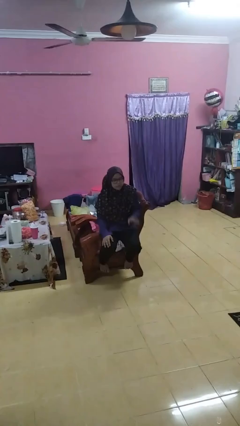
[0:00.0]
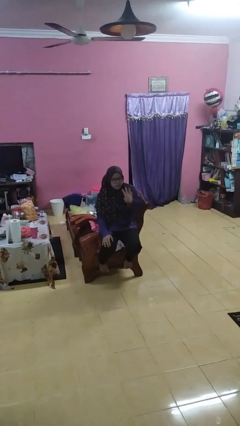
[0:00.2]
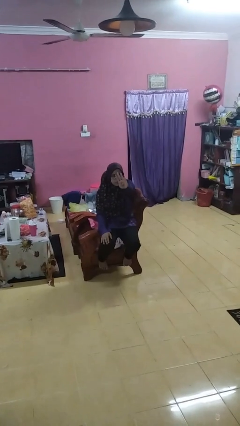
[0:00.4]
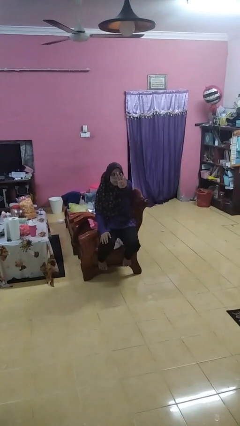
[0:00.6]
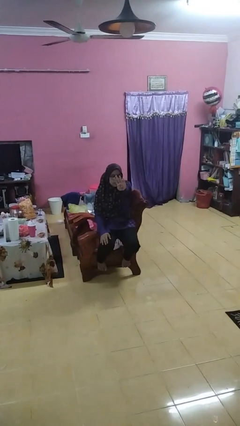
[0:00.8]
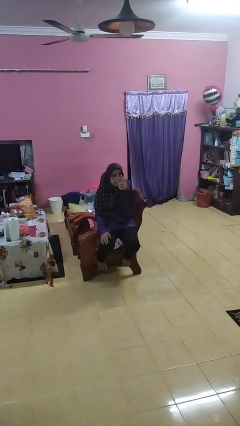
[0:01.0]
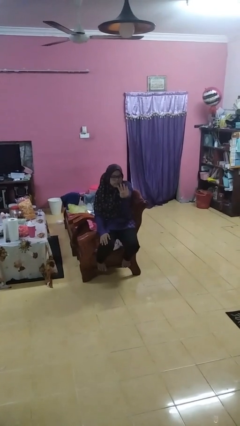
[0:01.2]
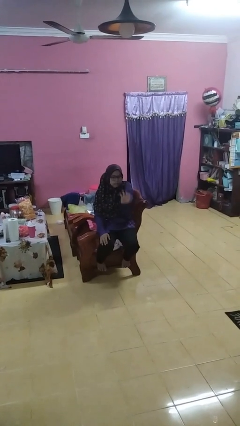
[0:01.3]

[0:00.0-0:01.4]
person gestures number four

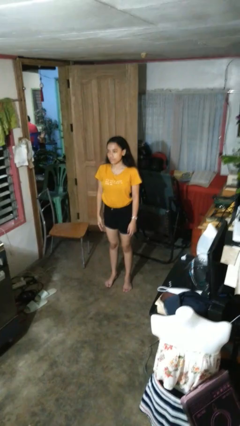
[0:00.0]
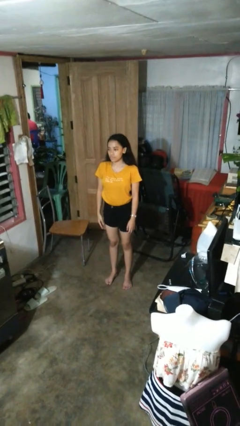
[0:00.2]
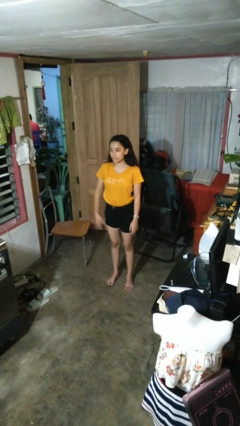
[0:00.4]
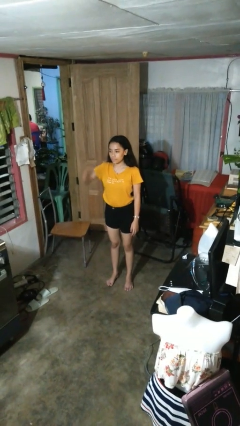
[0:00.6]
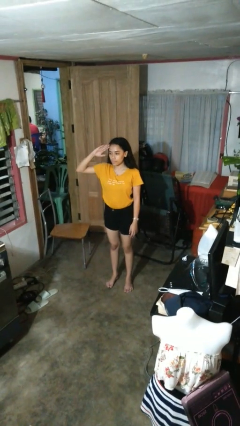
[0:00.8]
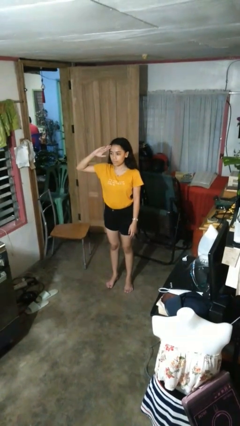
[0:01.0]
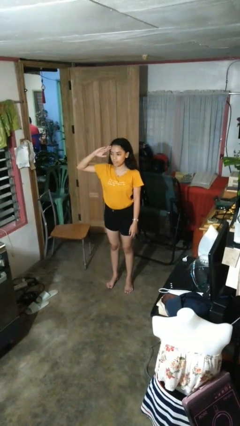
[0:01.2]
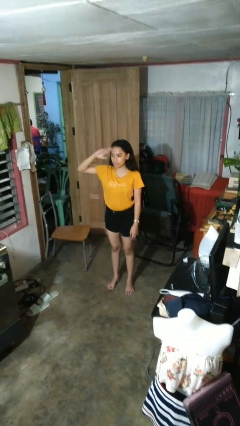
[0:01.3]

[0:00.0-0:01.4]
person salutes

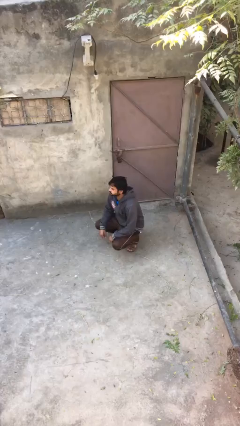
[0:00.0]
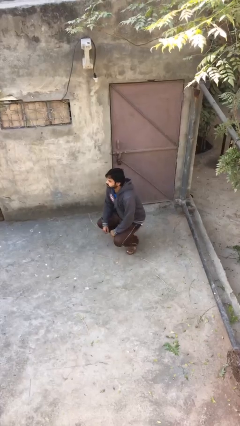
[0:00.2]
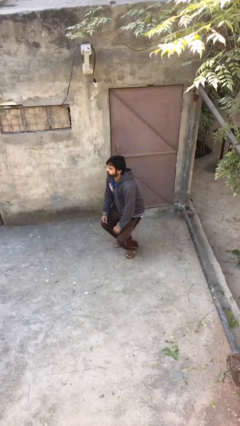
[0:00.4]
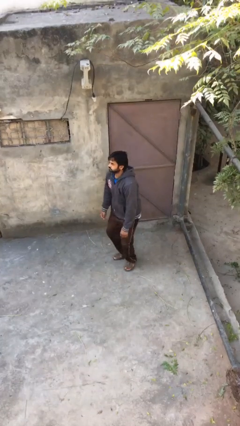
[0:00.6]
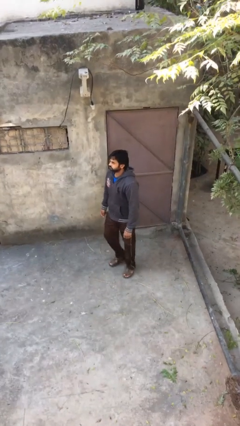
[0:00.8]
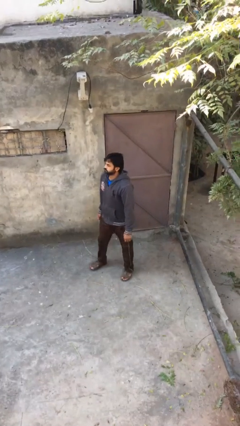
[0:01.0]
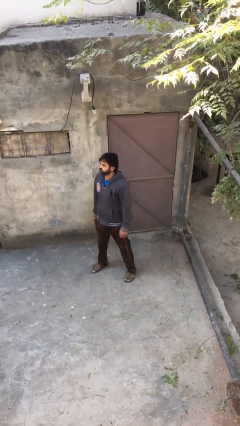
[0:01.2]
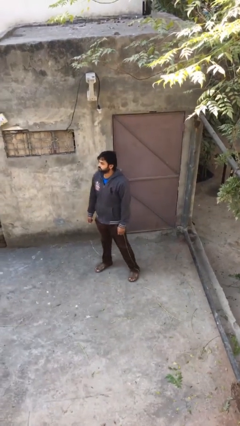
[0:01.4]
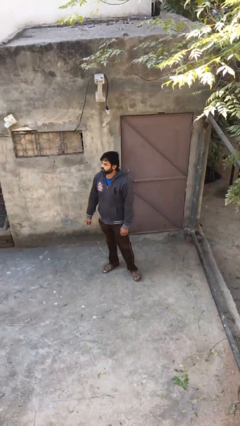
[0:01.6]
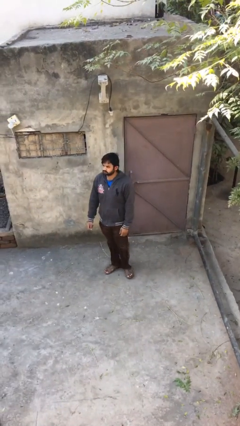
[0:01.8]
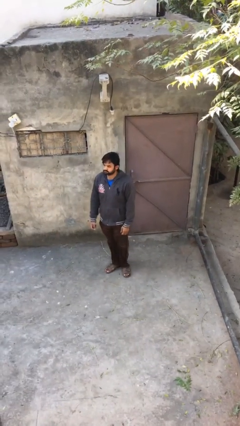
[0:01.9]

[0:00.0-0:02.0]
person stands up

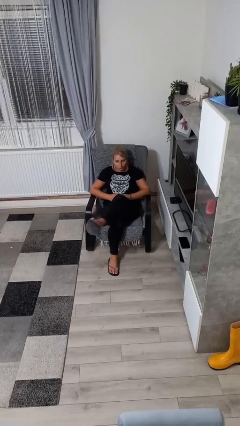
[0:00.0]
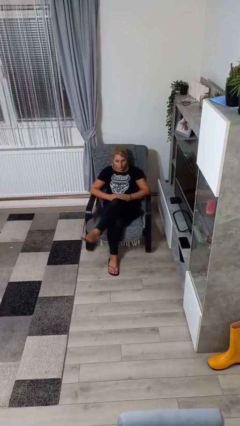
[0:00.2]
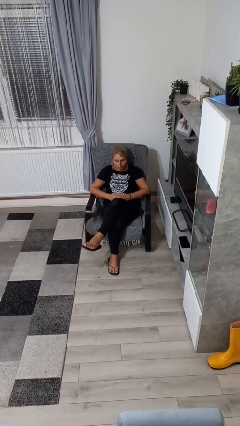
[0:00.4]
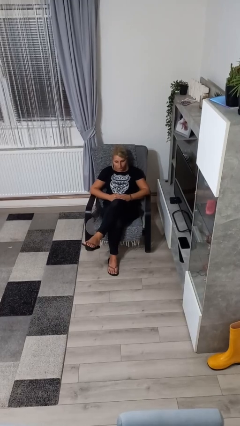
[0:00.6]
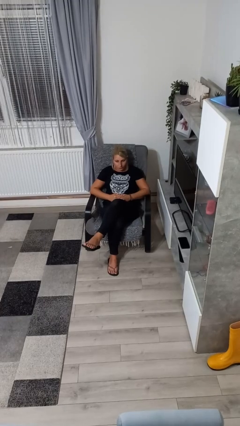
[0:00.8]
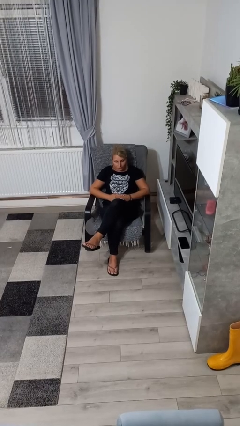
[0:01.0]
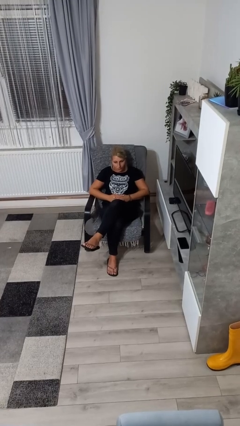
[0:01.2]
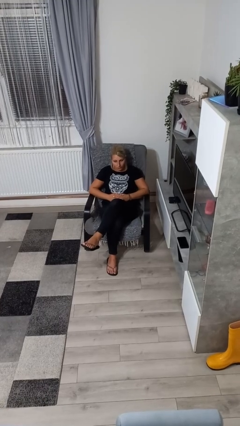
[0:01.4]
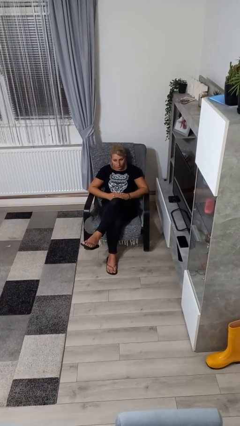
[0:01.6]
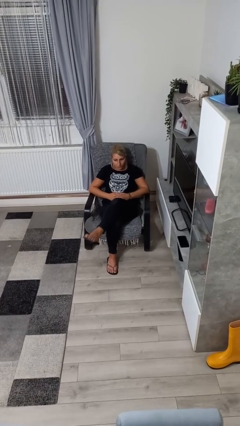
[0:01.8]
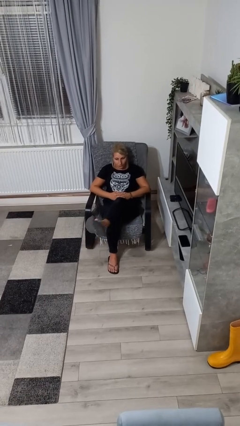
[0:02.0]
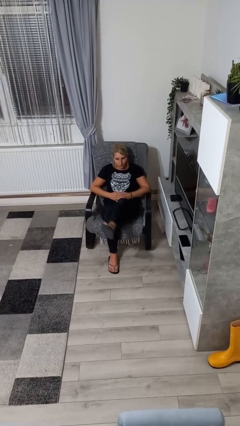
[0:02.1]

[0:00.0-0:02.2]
person crosses legs

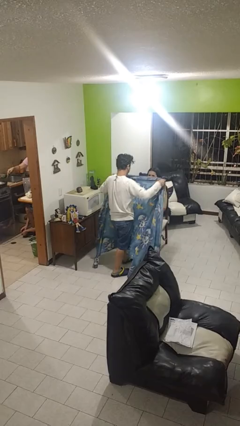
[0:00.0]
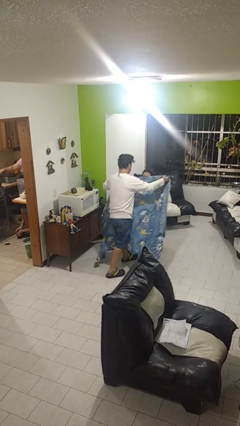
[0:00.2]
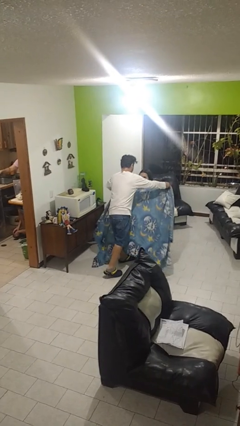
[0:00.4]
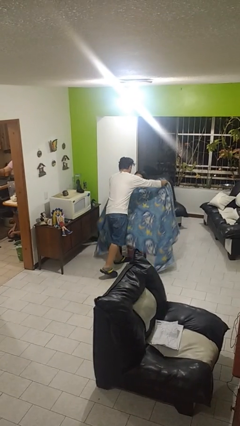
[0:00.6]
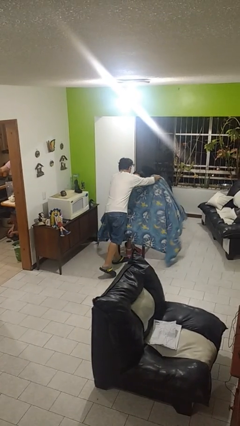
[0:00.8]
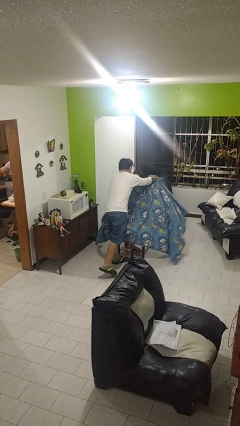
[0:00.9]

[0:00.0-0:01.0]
person covers friend with blanket

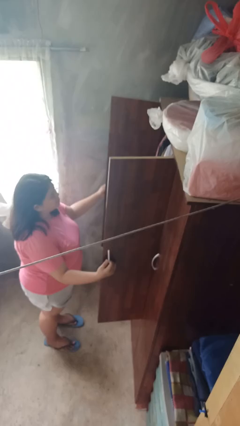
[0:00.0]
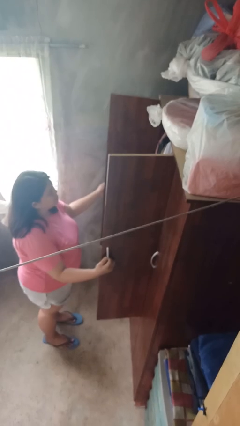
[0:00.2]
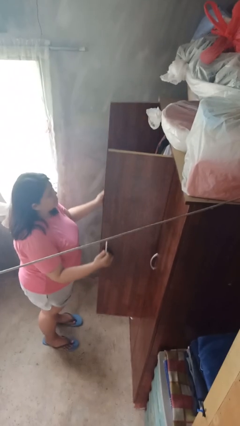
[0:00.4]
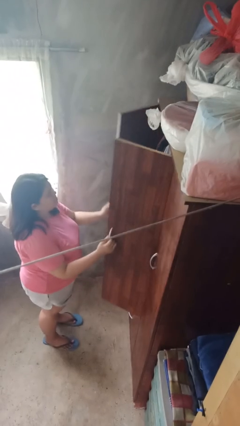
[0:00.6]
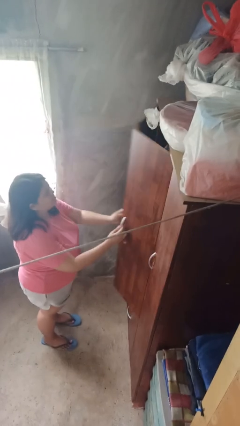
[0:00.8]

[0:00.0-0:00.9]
person closes closet door

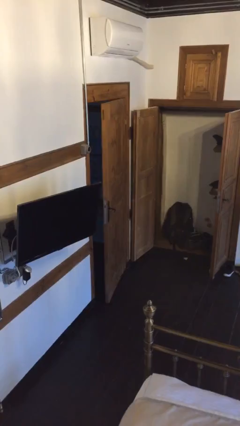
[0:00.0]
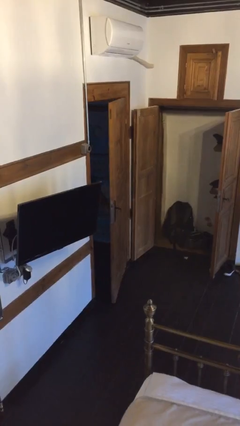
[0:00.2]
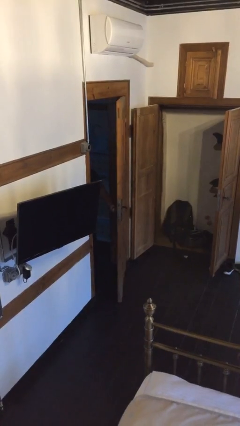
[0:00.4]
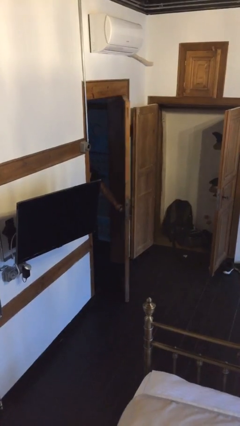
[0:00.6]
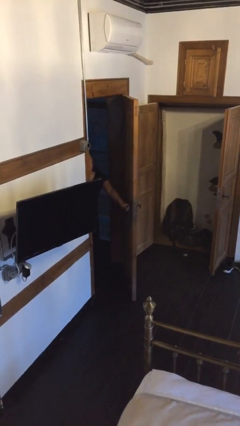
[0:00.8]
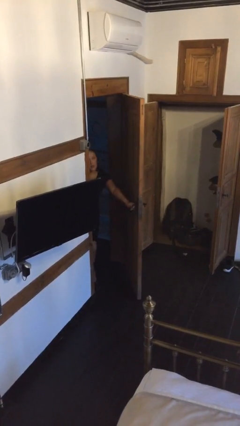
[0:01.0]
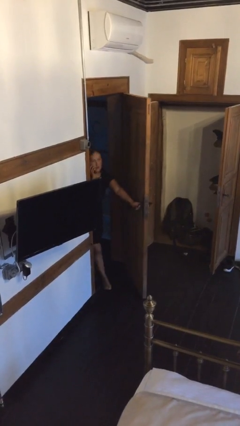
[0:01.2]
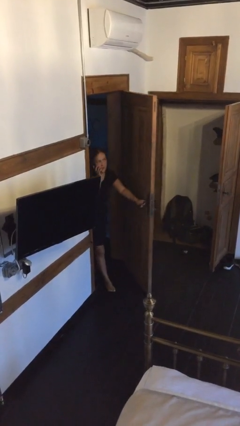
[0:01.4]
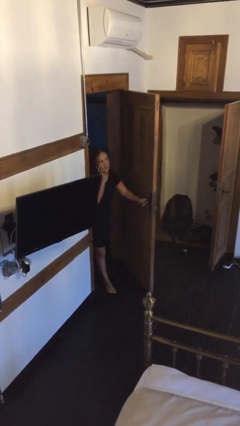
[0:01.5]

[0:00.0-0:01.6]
person opens facility door

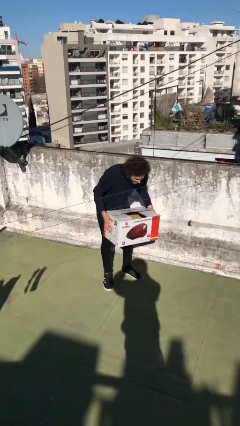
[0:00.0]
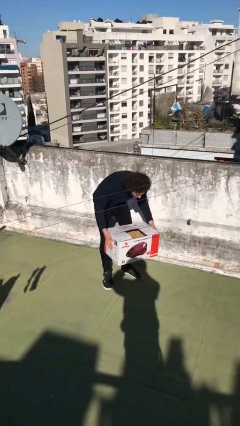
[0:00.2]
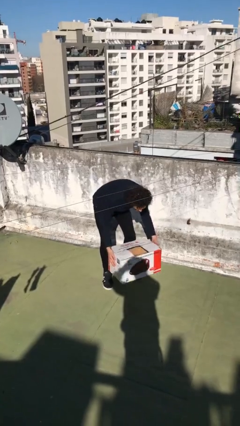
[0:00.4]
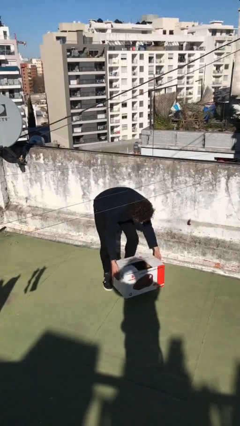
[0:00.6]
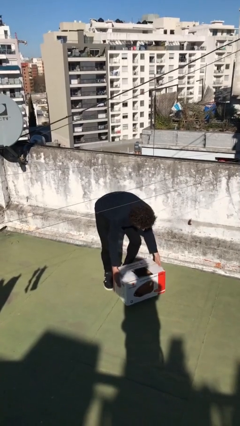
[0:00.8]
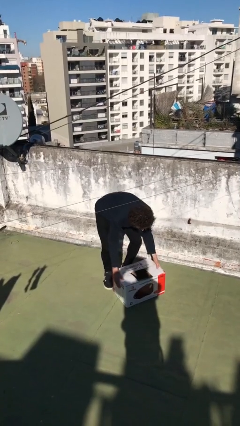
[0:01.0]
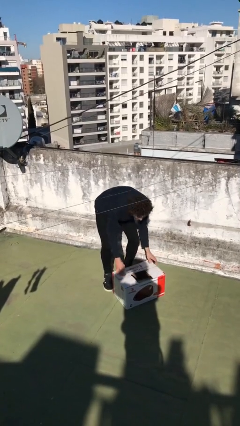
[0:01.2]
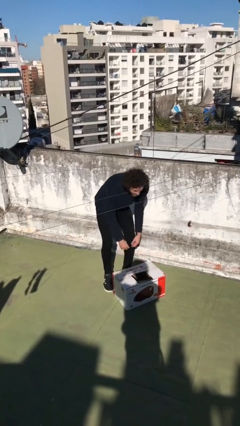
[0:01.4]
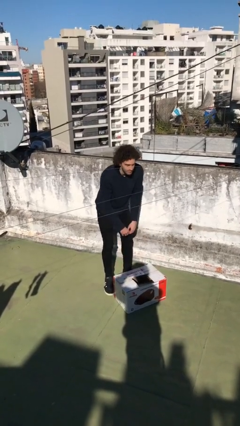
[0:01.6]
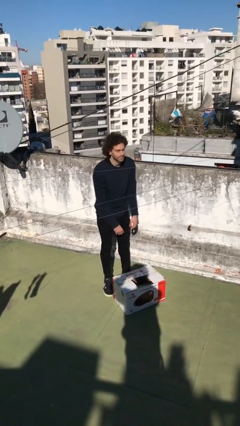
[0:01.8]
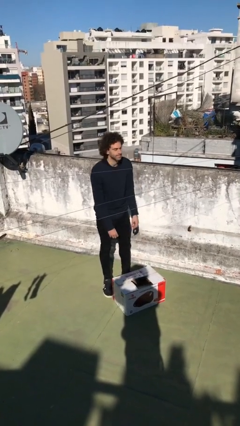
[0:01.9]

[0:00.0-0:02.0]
person puts down object on floor

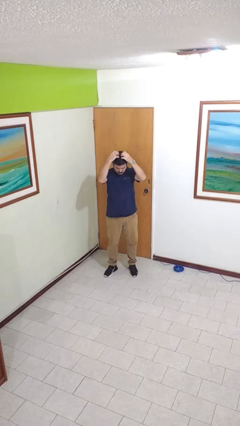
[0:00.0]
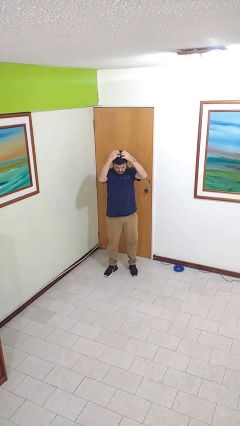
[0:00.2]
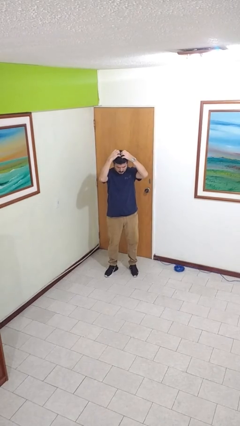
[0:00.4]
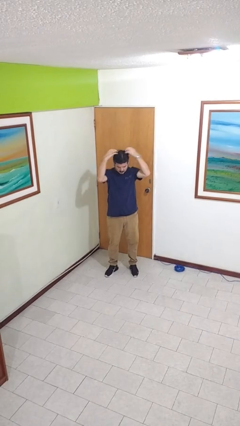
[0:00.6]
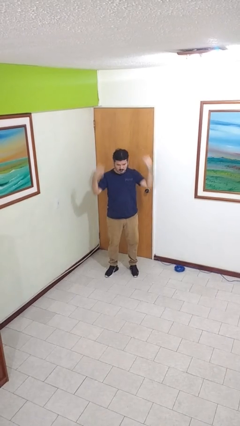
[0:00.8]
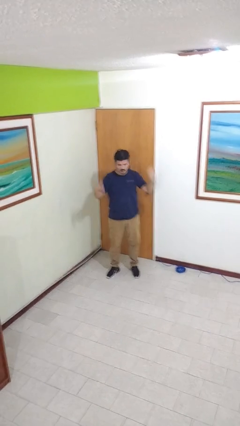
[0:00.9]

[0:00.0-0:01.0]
person scratches face

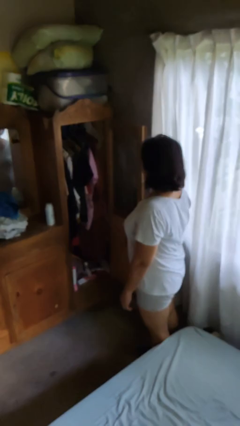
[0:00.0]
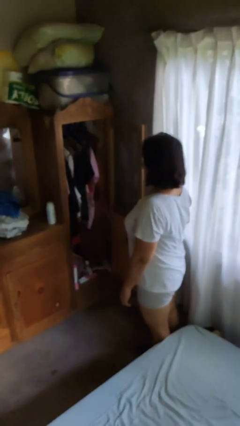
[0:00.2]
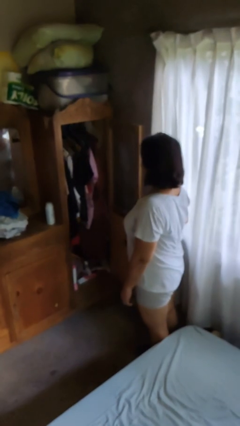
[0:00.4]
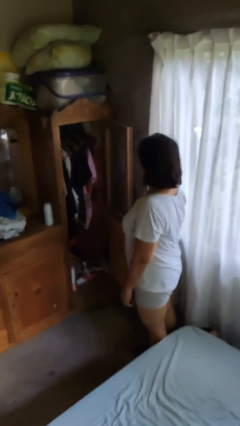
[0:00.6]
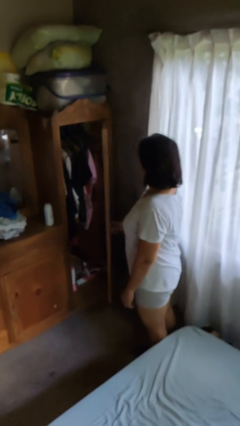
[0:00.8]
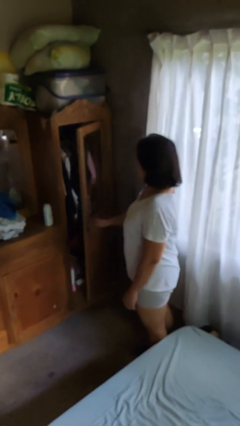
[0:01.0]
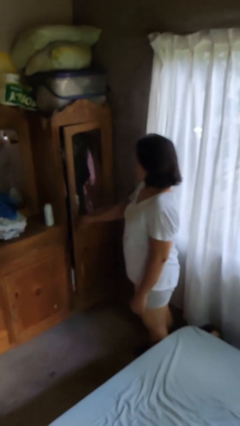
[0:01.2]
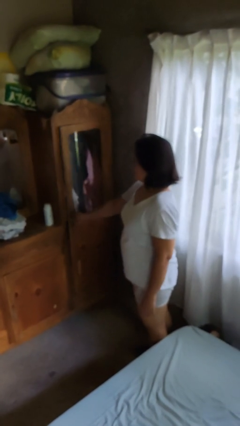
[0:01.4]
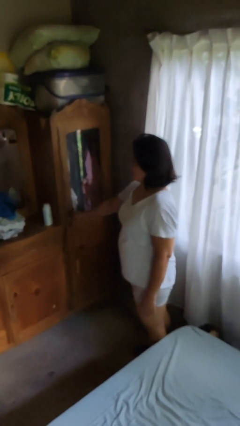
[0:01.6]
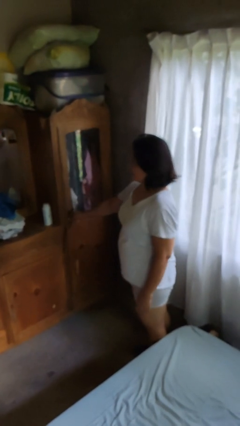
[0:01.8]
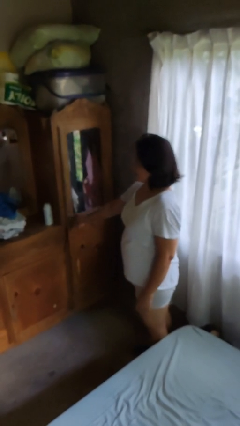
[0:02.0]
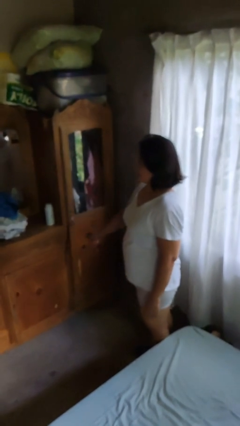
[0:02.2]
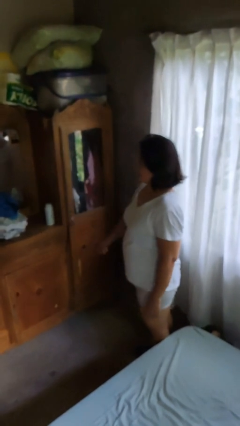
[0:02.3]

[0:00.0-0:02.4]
person closes dresser drawer

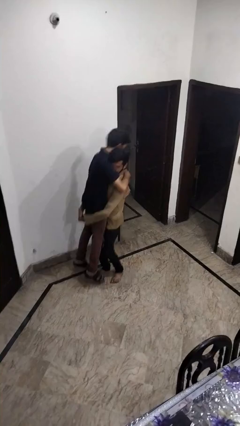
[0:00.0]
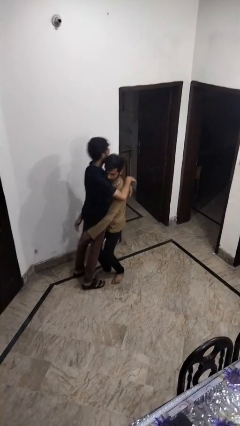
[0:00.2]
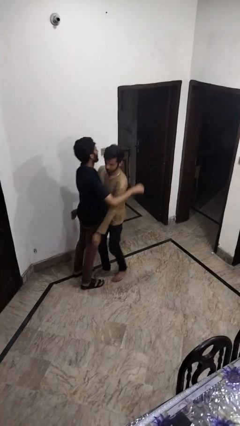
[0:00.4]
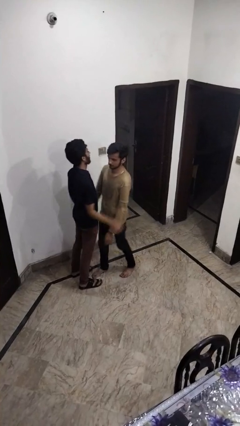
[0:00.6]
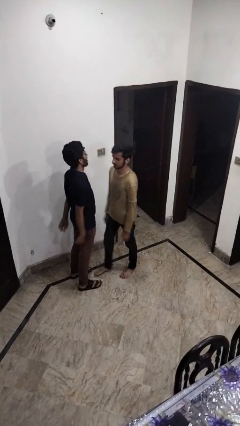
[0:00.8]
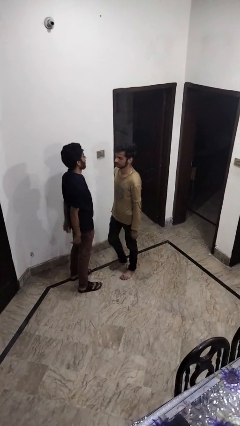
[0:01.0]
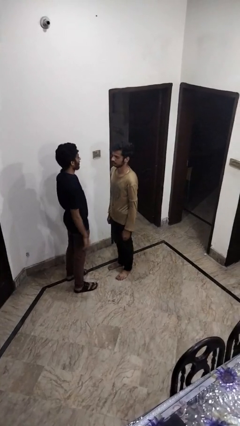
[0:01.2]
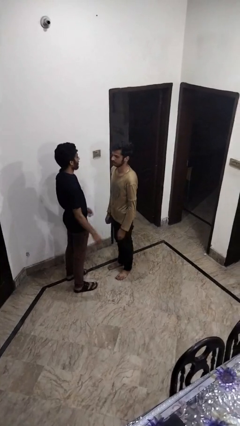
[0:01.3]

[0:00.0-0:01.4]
person puts down person
